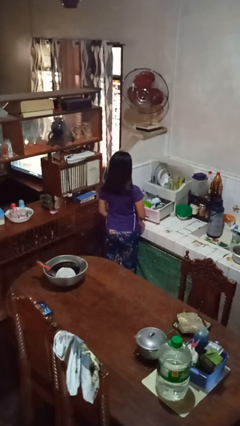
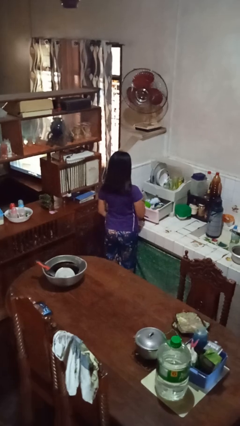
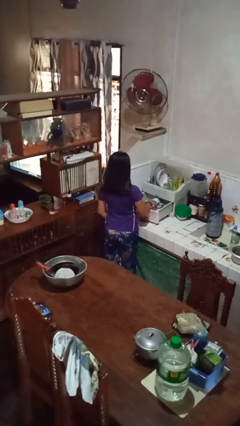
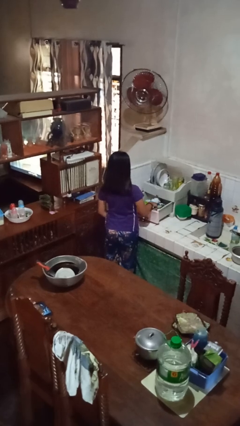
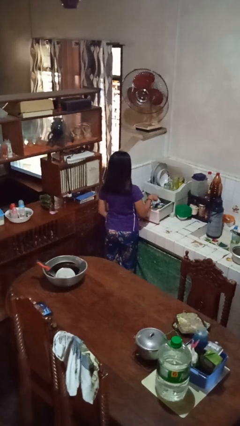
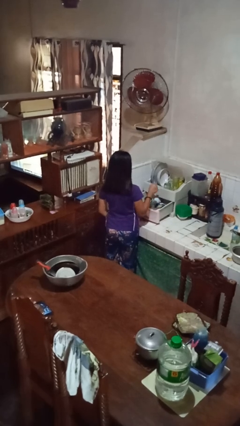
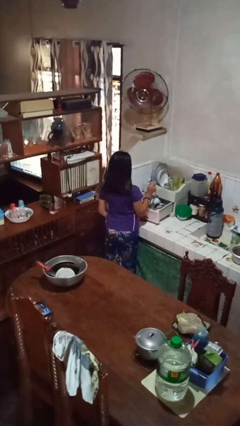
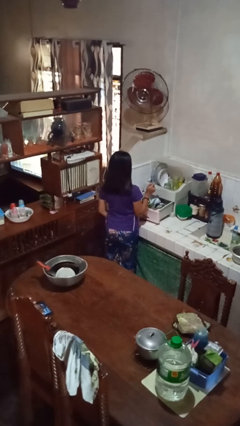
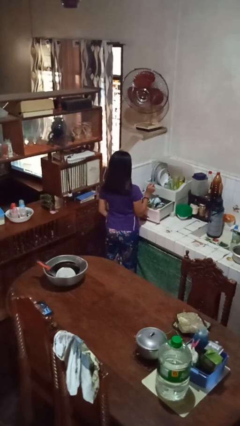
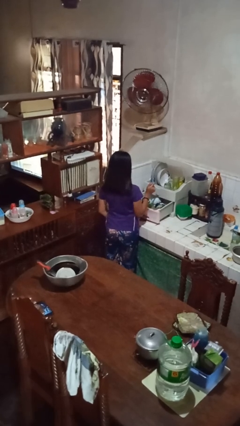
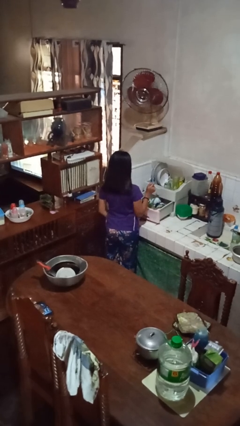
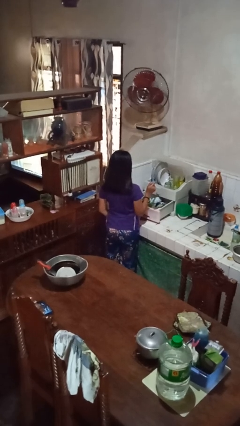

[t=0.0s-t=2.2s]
person takes object from kitchen drawer

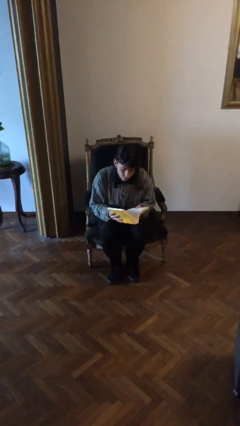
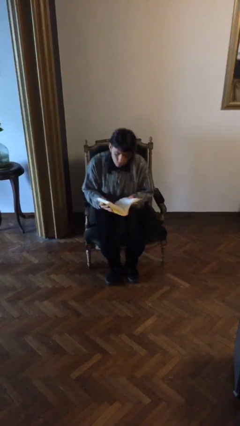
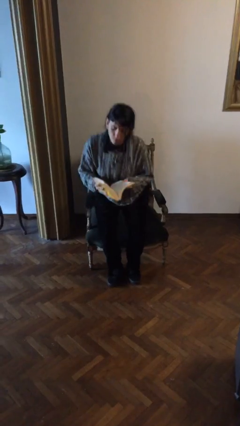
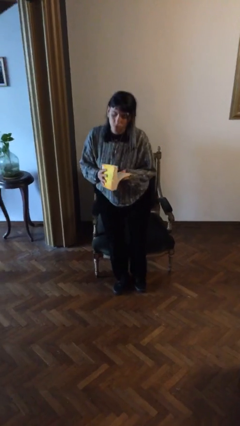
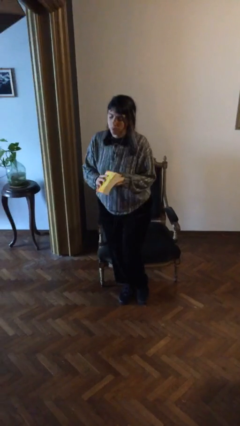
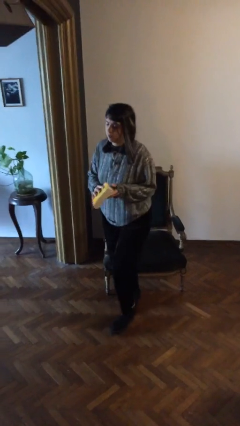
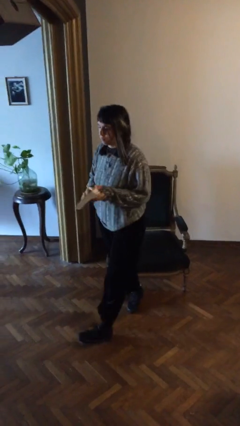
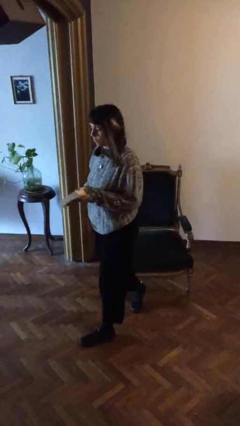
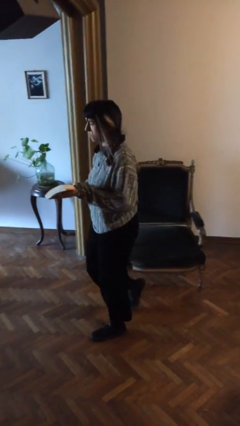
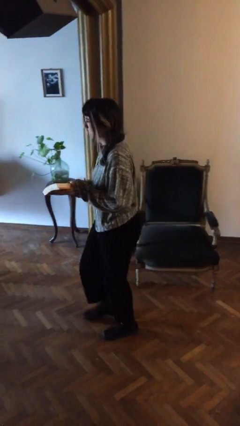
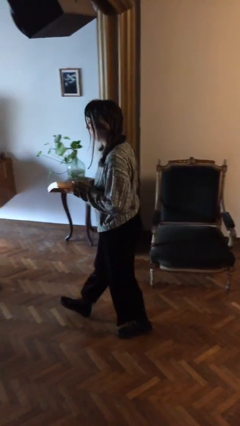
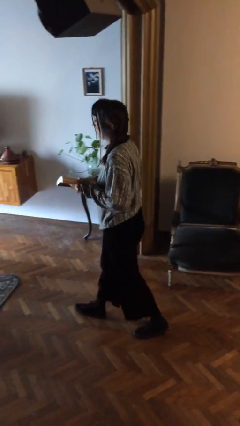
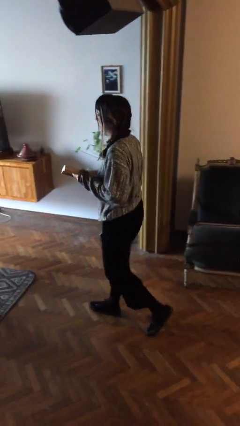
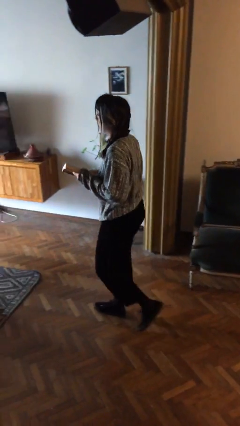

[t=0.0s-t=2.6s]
person stands up

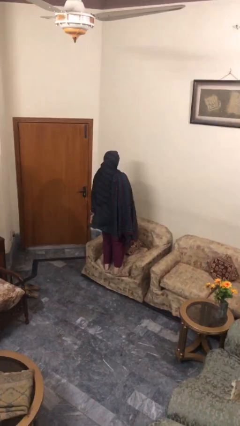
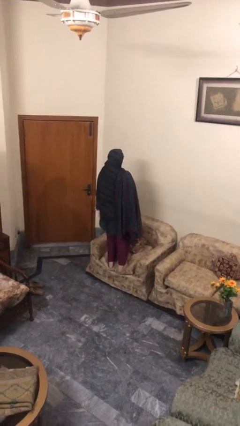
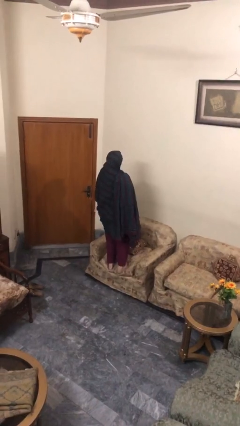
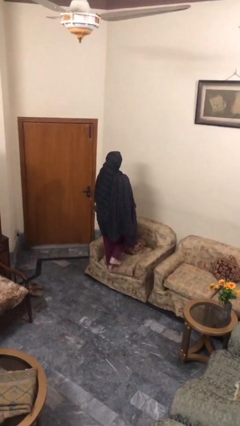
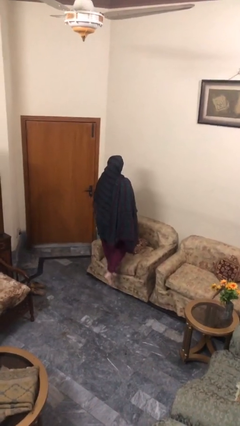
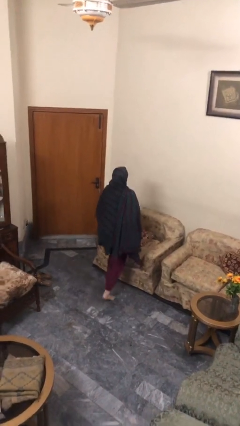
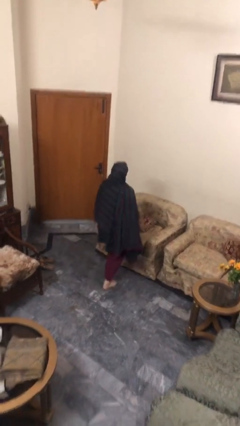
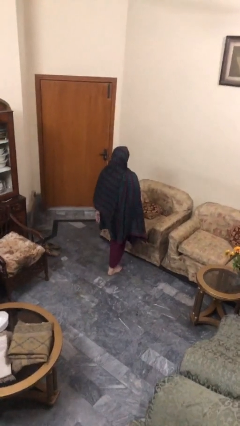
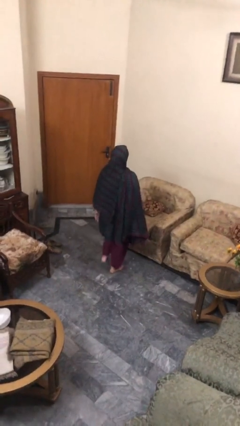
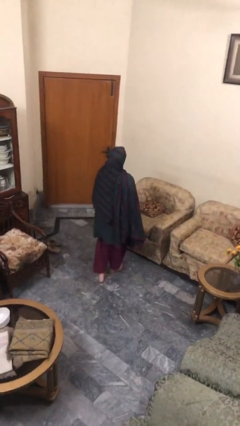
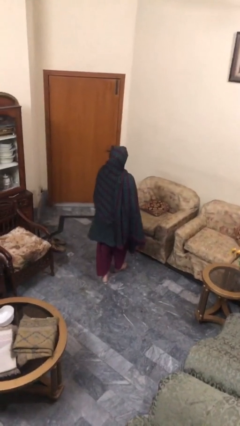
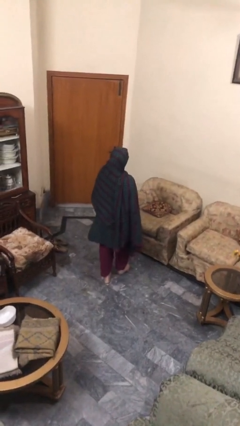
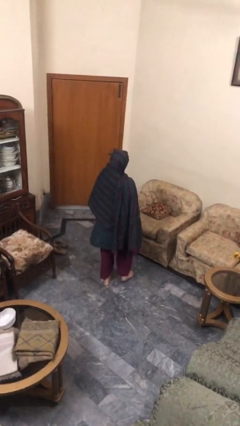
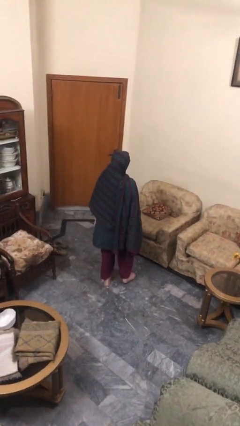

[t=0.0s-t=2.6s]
person climbs off couch

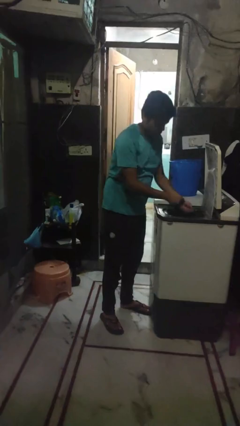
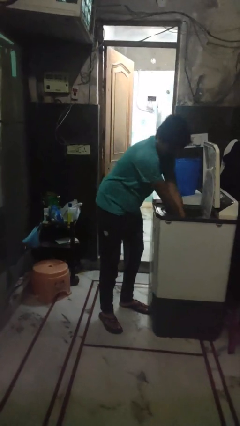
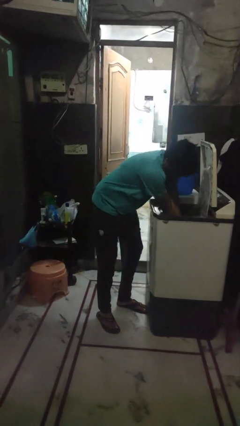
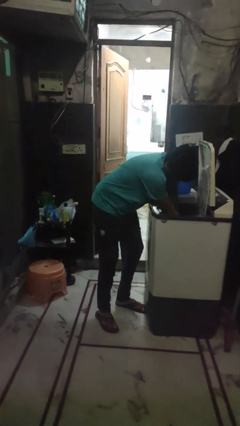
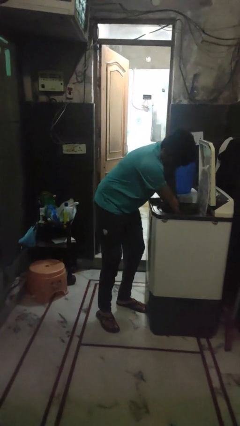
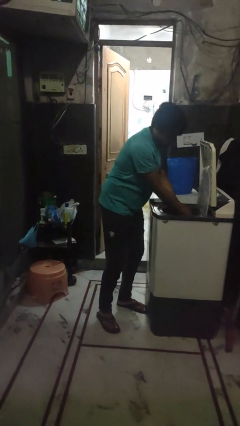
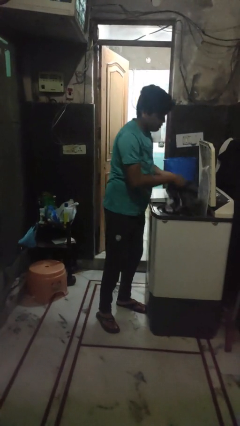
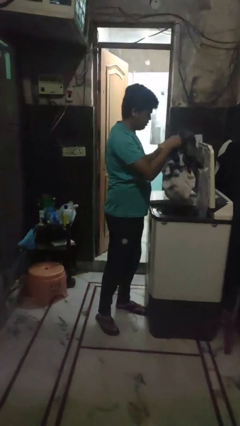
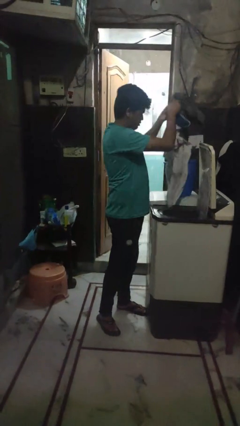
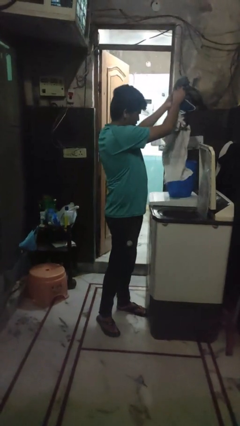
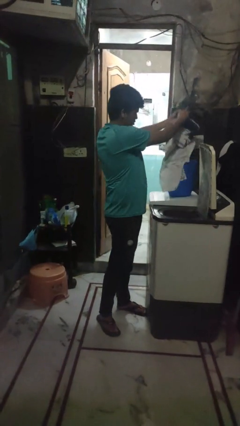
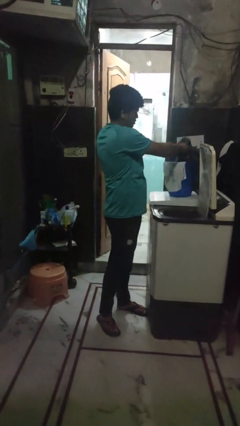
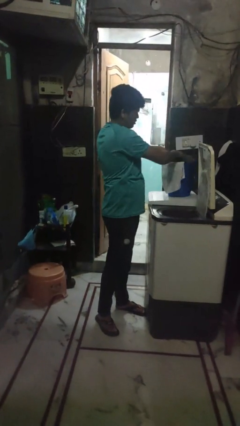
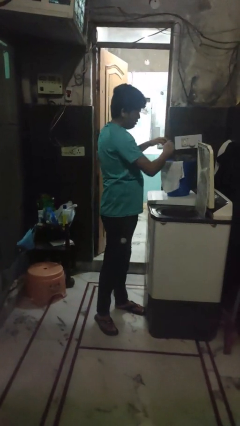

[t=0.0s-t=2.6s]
person unloads clotheswasher

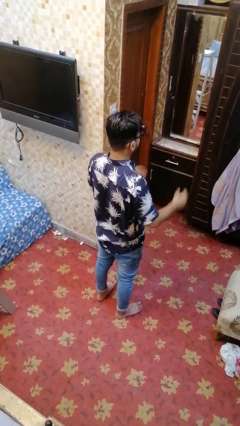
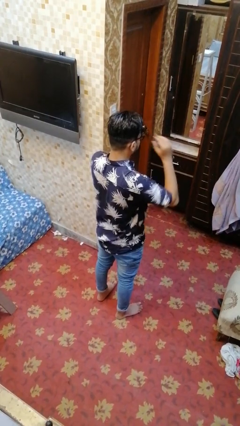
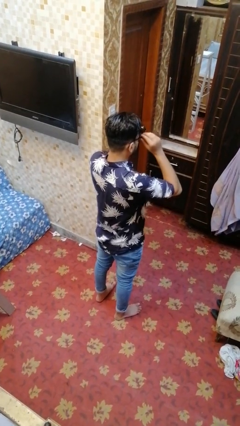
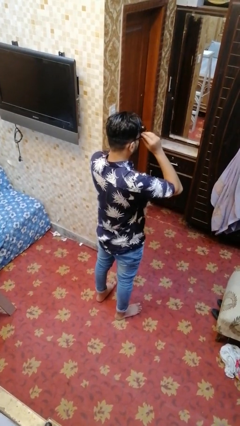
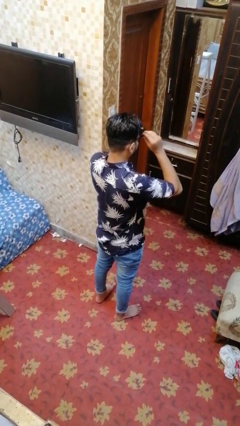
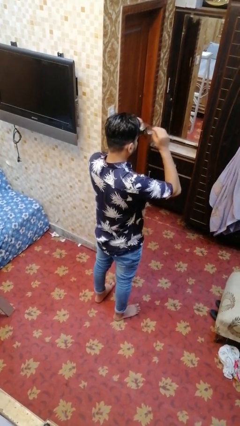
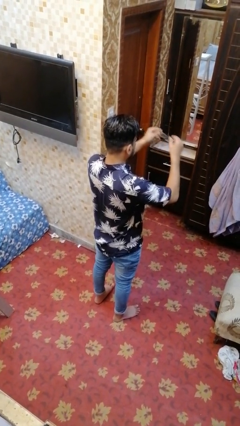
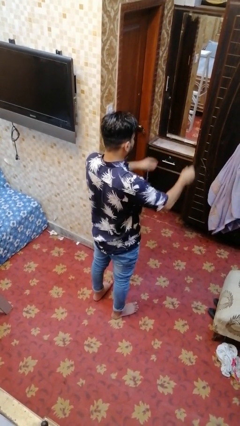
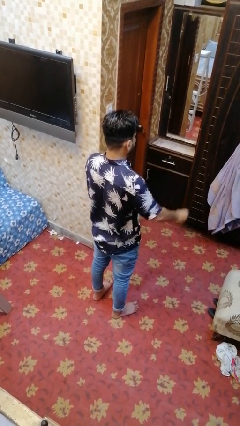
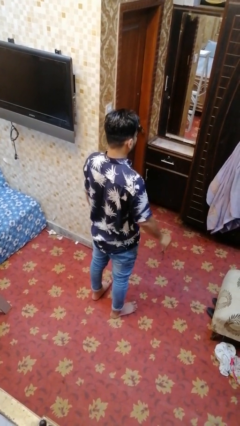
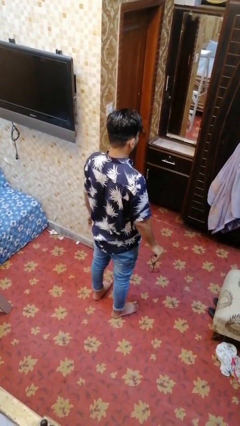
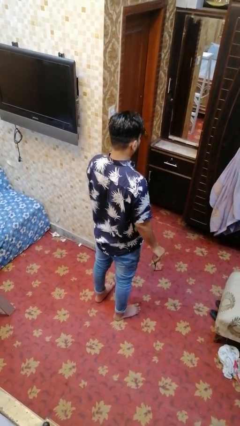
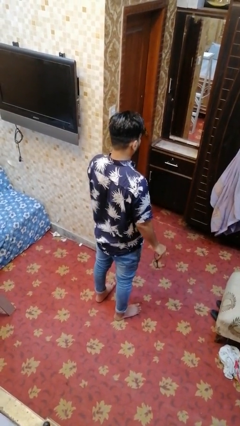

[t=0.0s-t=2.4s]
person takes off glasses

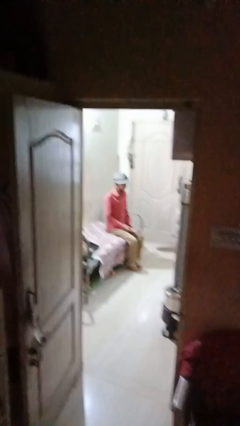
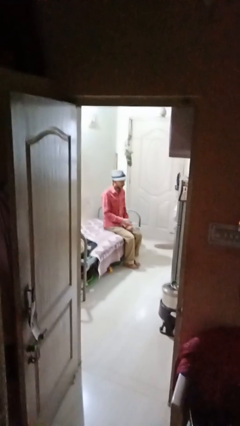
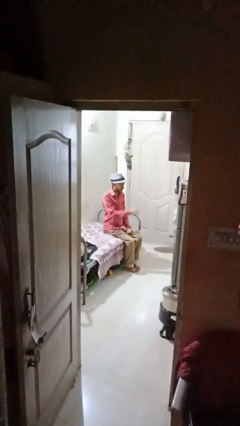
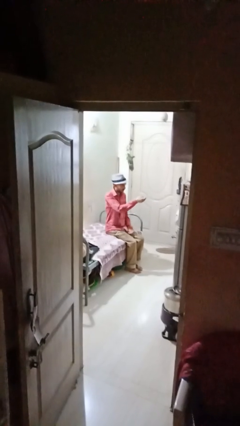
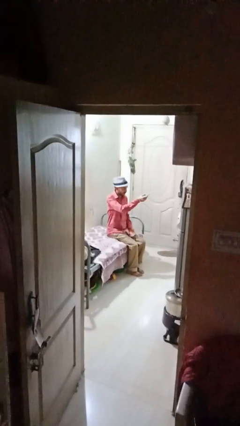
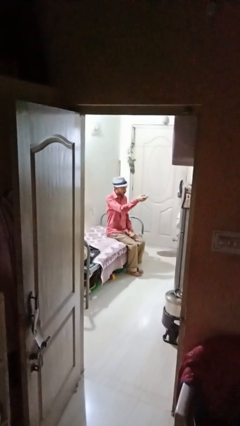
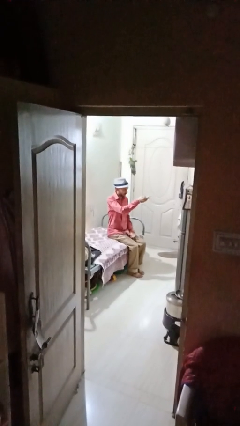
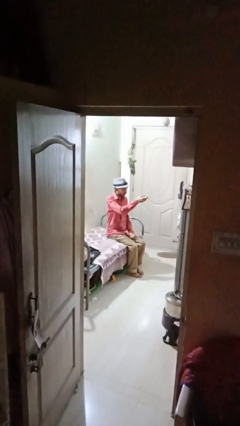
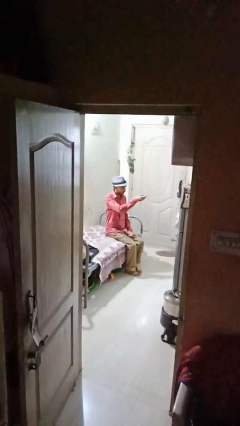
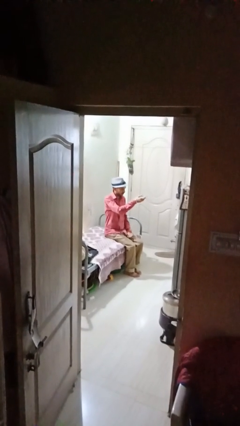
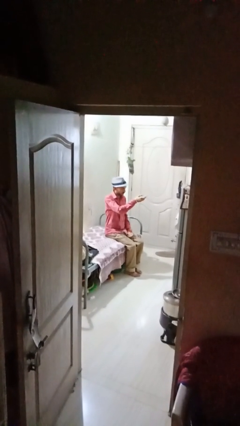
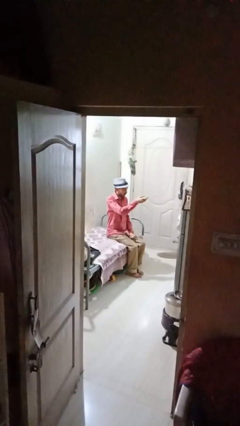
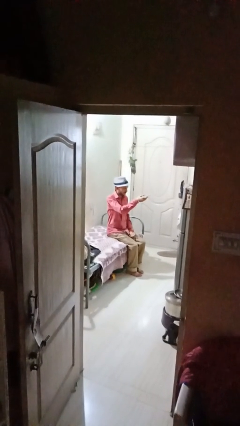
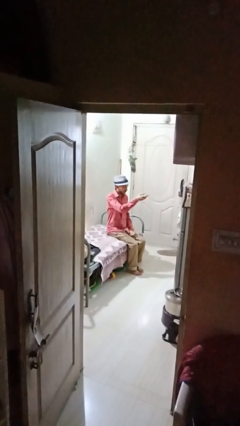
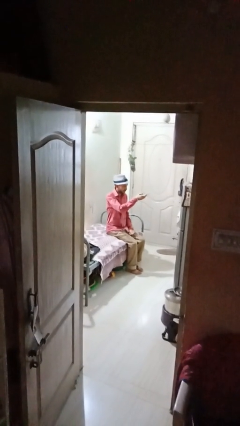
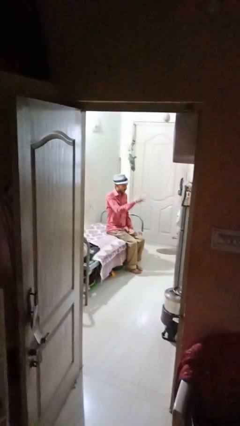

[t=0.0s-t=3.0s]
person uses television remote

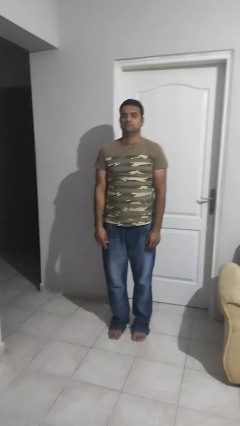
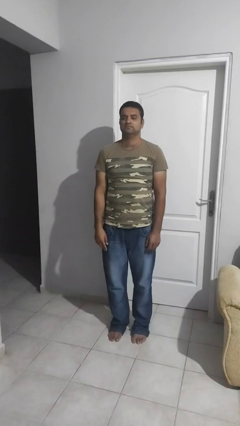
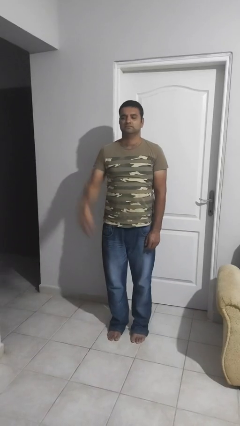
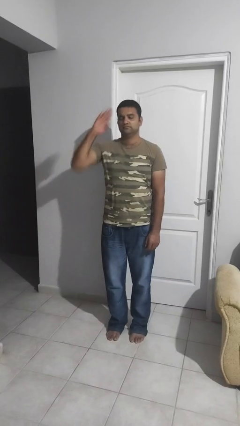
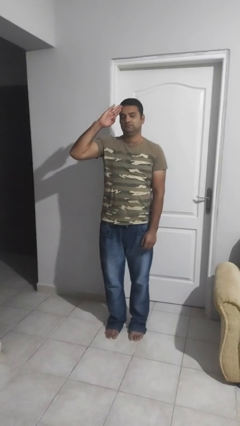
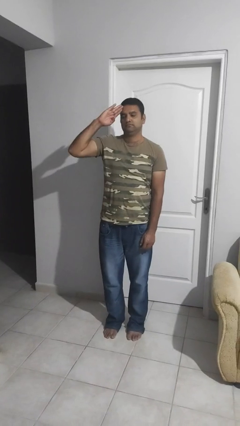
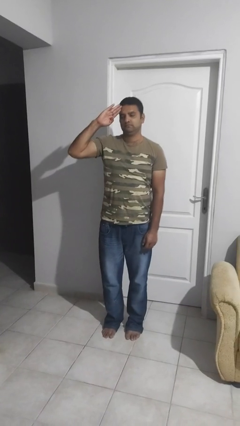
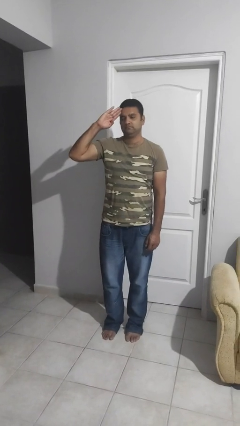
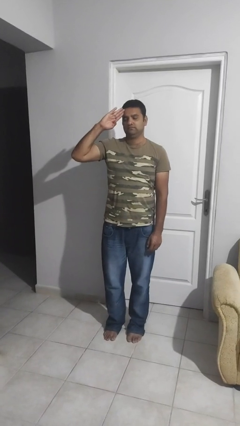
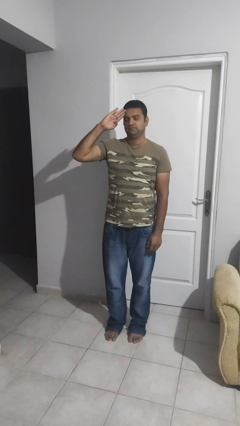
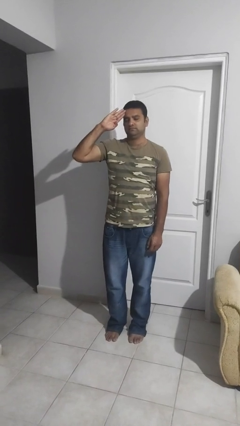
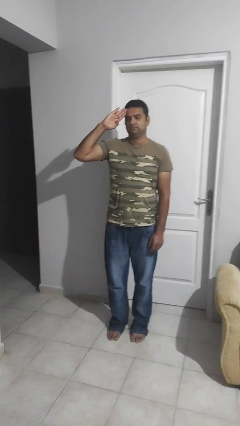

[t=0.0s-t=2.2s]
person salutes
